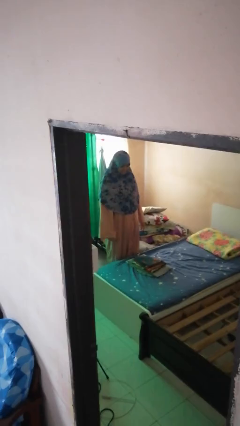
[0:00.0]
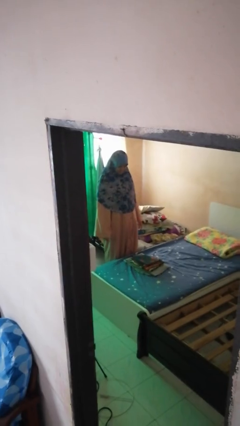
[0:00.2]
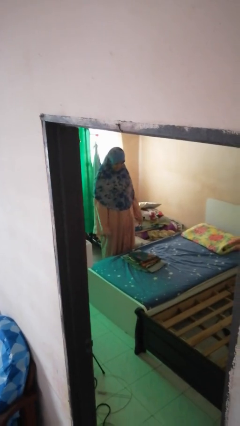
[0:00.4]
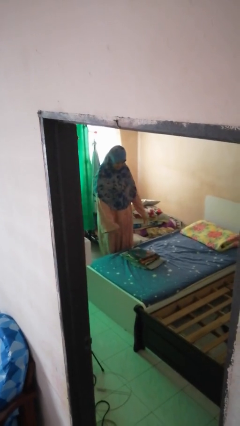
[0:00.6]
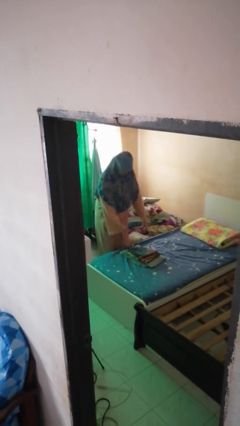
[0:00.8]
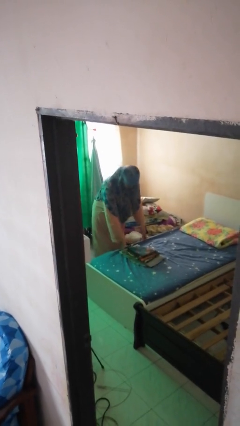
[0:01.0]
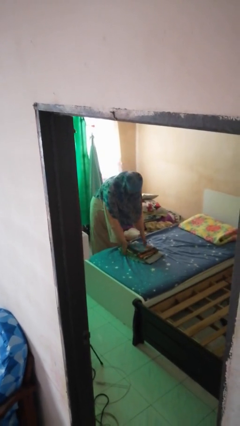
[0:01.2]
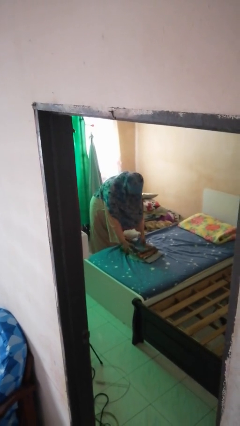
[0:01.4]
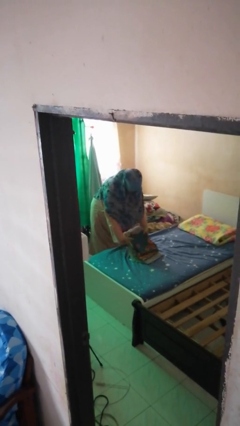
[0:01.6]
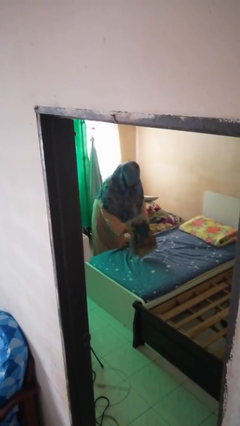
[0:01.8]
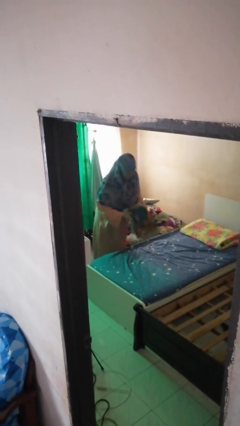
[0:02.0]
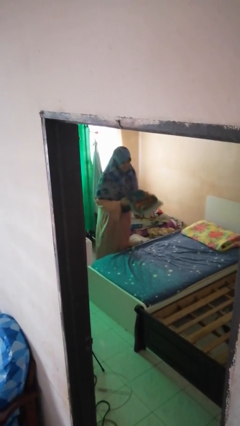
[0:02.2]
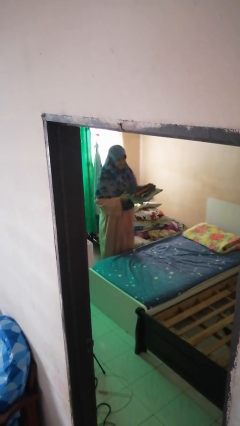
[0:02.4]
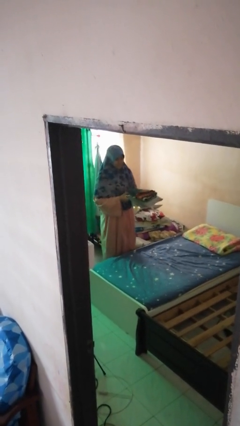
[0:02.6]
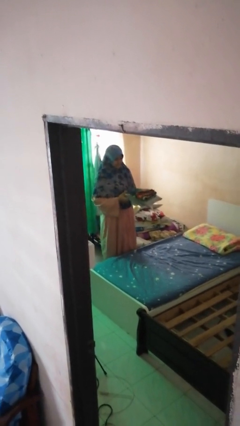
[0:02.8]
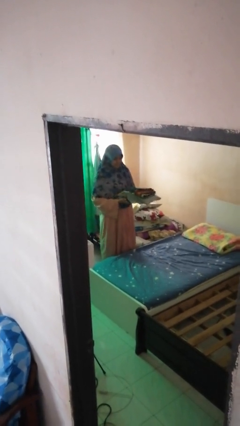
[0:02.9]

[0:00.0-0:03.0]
person picks up object from bed

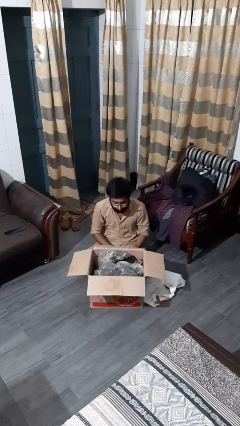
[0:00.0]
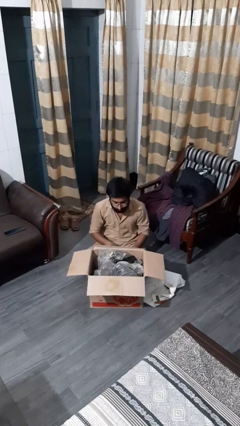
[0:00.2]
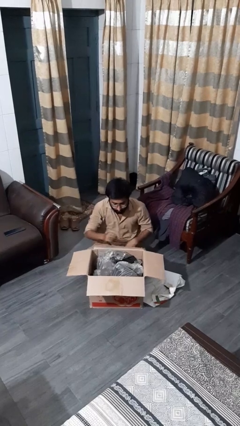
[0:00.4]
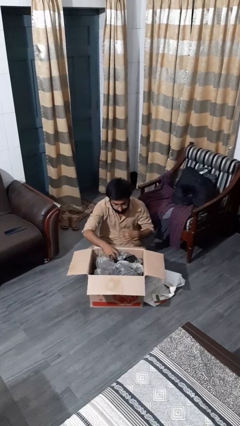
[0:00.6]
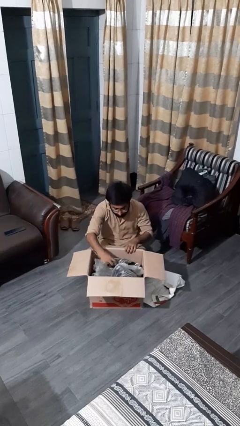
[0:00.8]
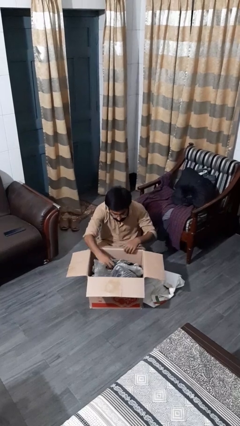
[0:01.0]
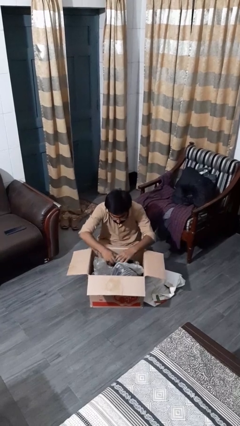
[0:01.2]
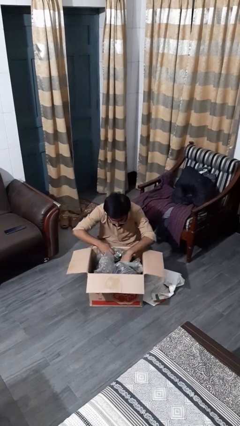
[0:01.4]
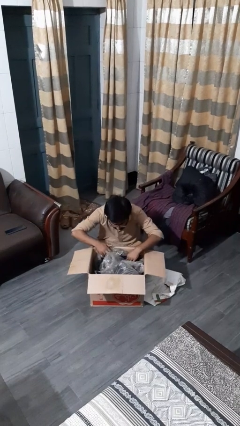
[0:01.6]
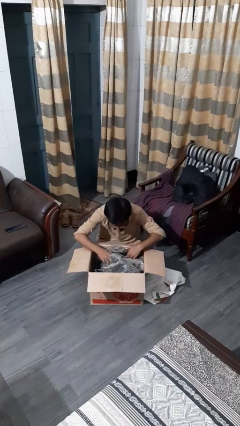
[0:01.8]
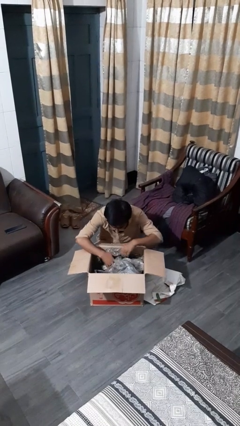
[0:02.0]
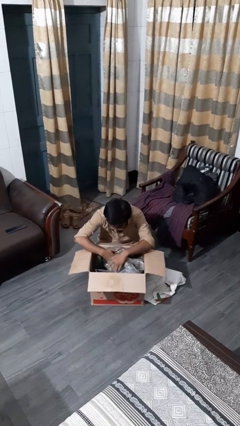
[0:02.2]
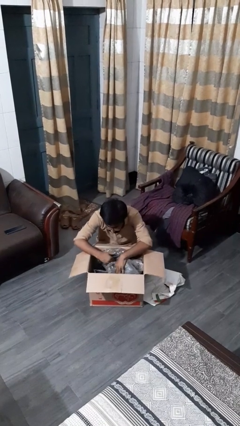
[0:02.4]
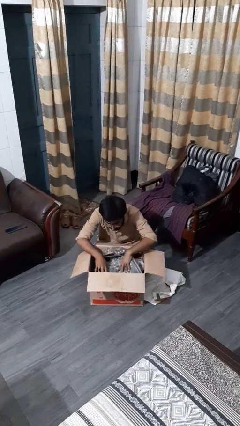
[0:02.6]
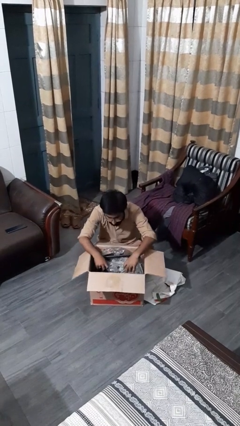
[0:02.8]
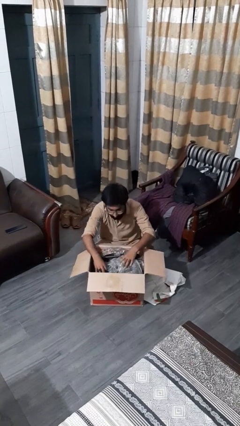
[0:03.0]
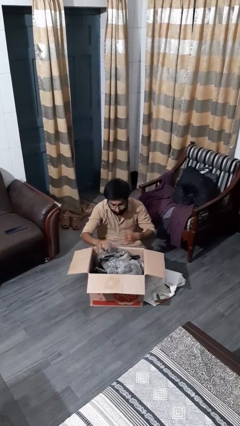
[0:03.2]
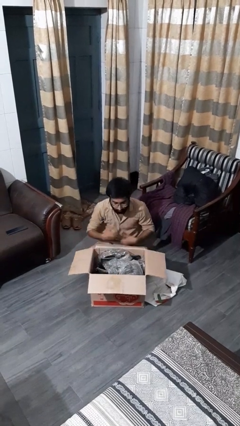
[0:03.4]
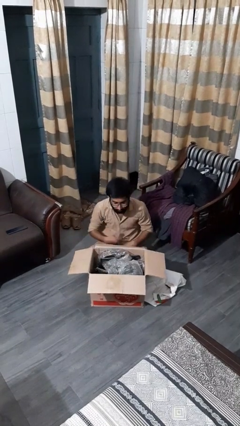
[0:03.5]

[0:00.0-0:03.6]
person searches in box

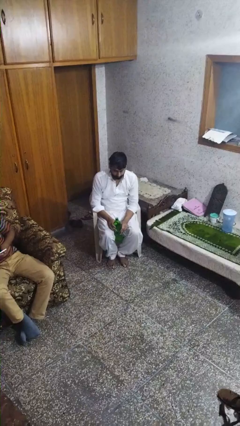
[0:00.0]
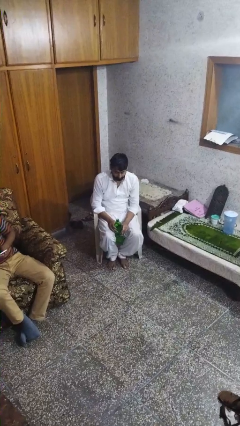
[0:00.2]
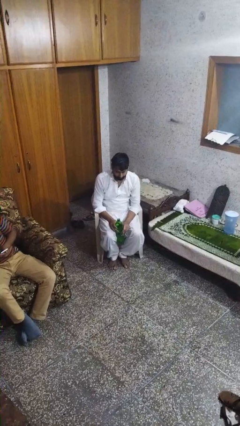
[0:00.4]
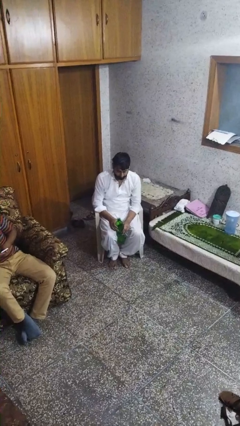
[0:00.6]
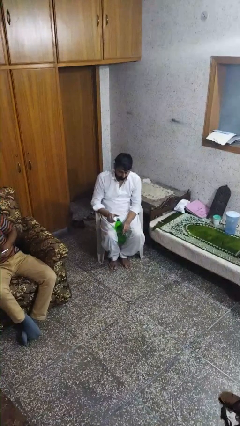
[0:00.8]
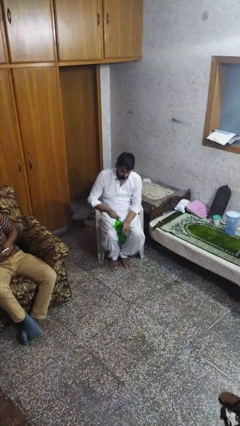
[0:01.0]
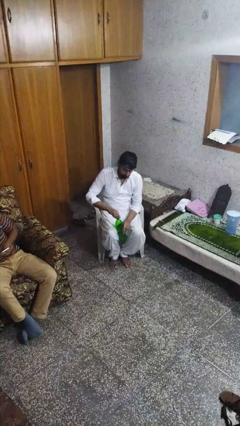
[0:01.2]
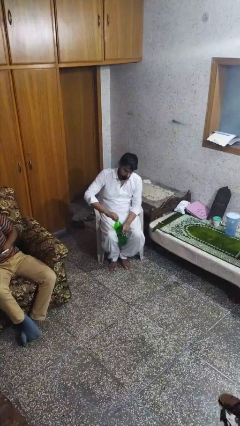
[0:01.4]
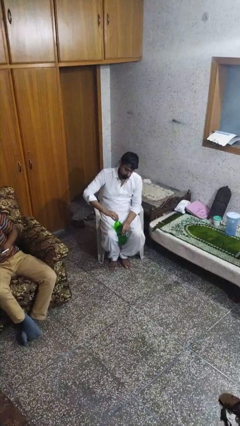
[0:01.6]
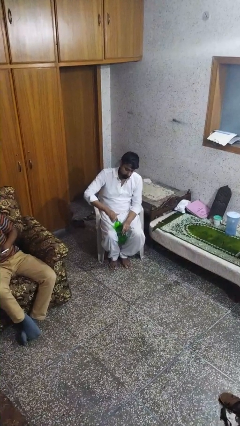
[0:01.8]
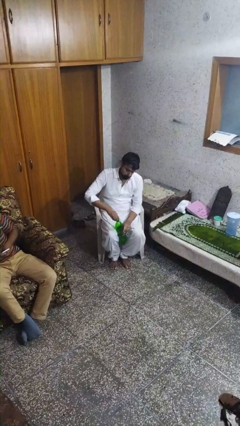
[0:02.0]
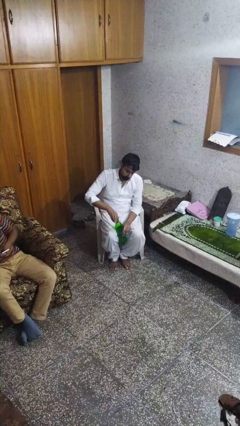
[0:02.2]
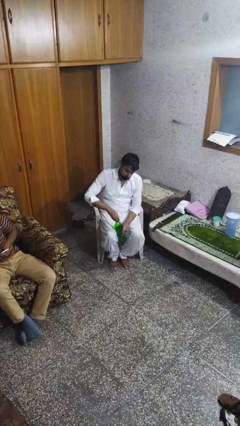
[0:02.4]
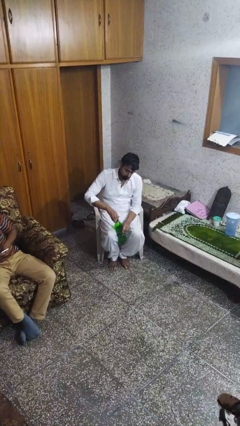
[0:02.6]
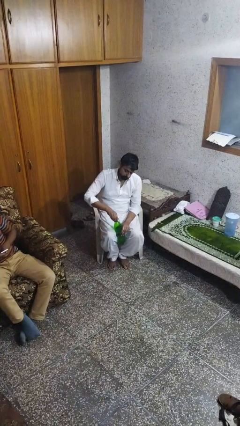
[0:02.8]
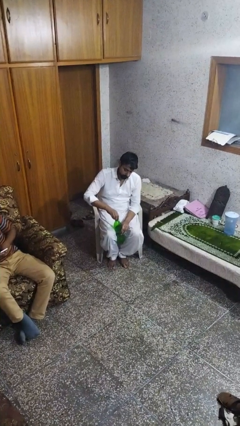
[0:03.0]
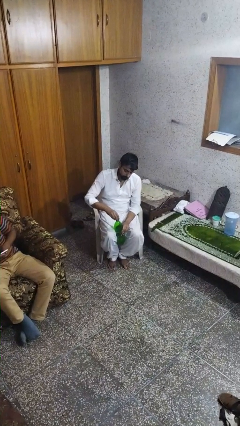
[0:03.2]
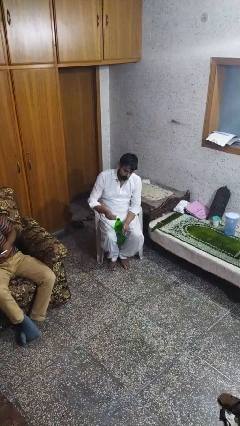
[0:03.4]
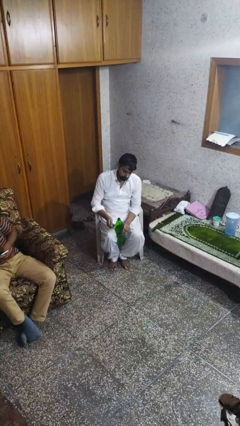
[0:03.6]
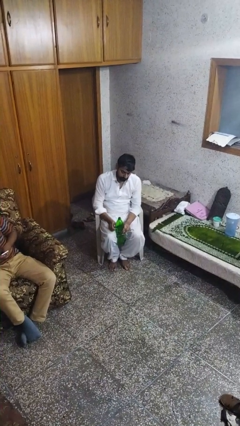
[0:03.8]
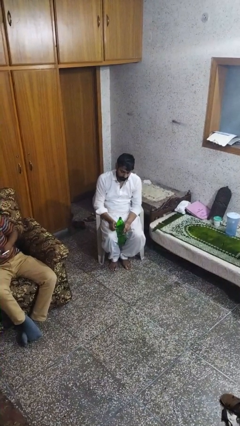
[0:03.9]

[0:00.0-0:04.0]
person unscrews lid from bottle

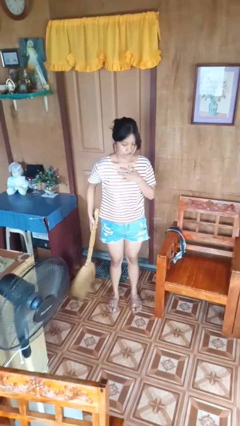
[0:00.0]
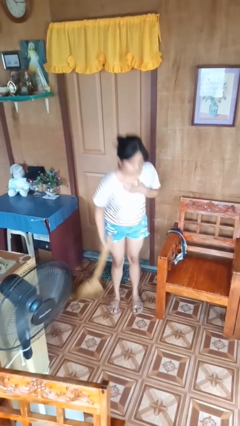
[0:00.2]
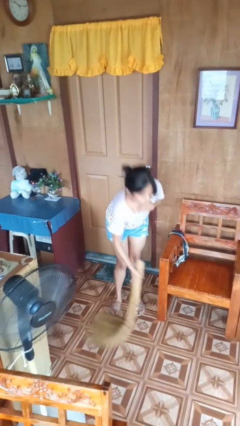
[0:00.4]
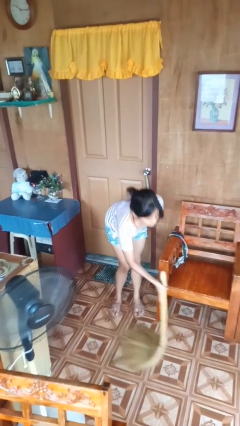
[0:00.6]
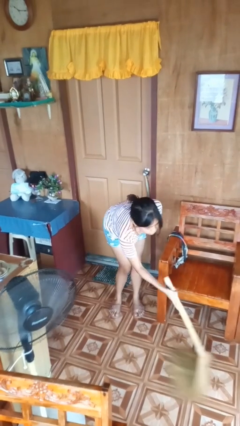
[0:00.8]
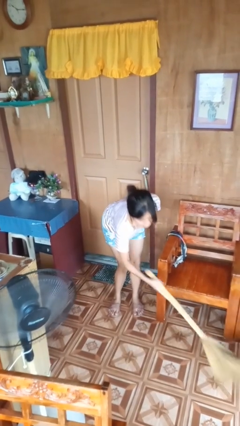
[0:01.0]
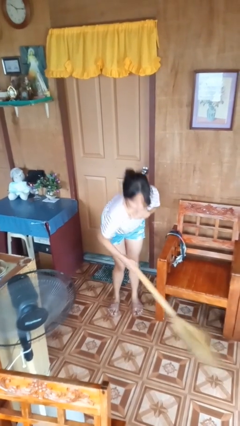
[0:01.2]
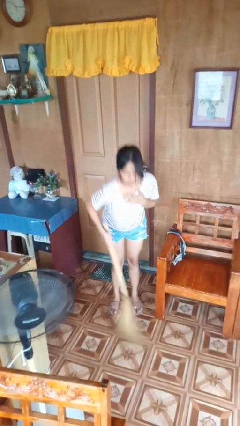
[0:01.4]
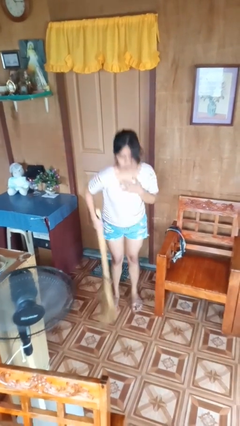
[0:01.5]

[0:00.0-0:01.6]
person sweeps floor

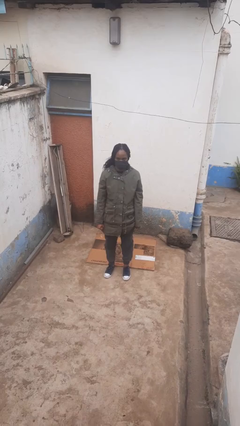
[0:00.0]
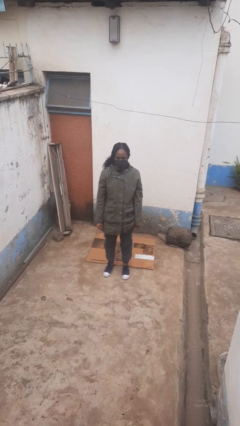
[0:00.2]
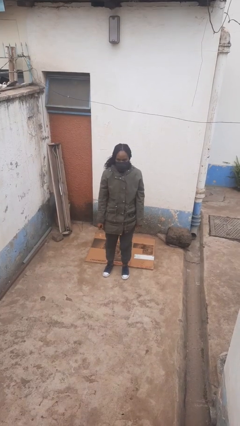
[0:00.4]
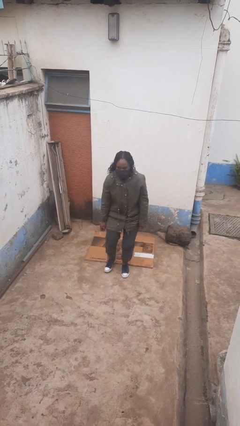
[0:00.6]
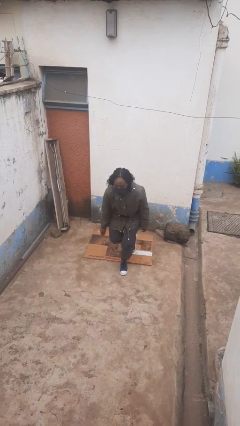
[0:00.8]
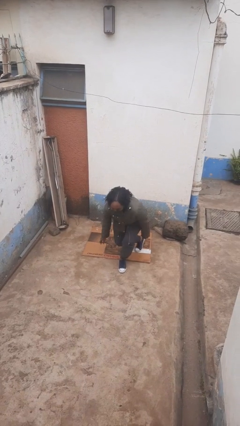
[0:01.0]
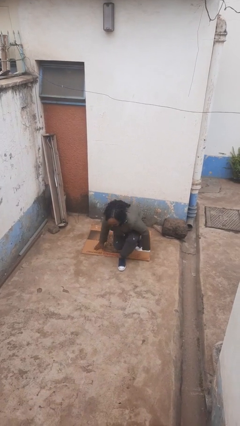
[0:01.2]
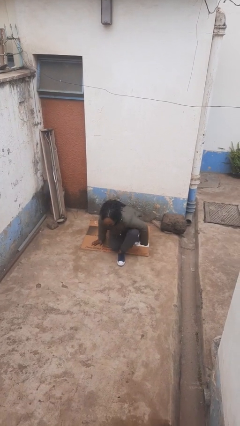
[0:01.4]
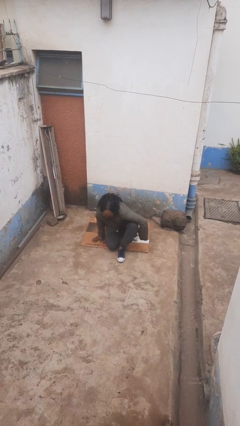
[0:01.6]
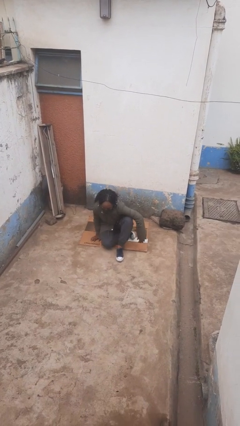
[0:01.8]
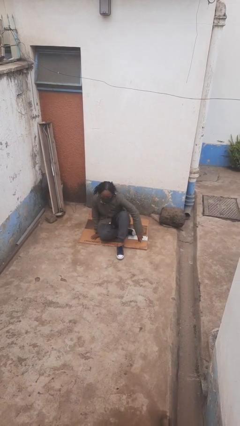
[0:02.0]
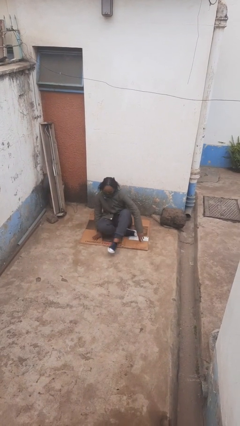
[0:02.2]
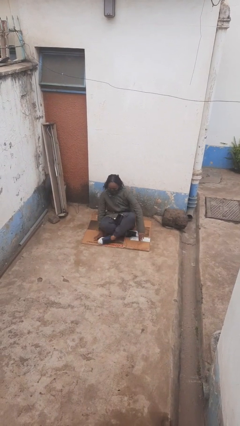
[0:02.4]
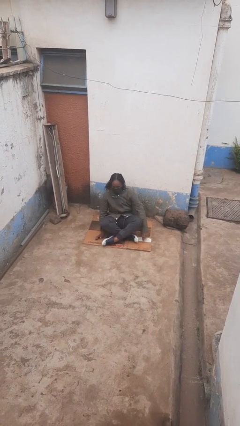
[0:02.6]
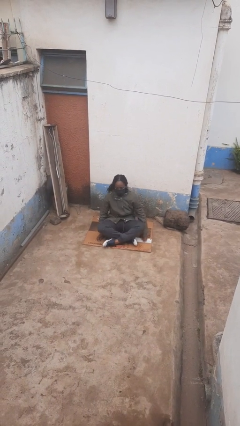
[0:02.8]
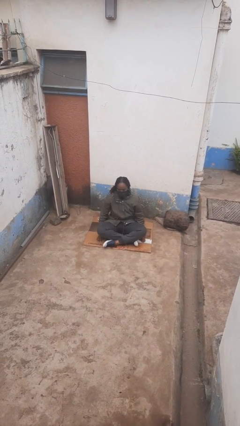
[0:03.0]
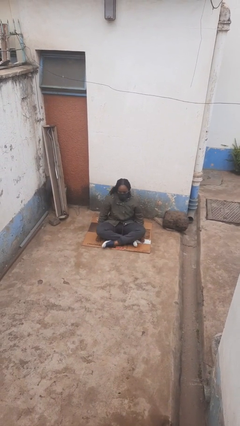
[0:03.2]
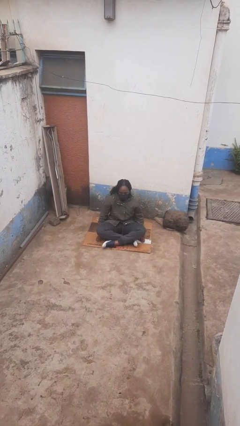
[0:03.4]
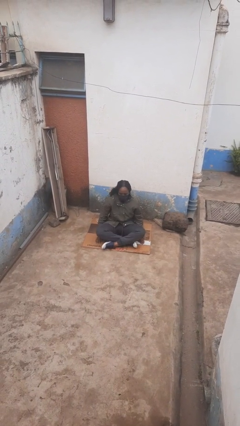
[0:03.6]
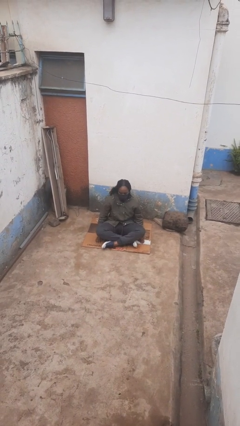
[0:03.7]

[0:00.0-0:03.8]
person sits crisscross

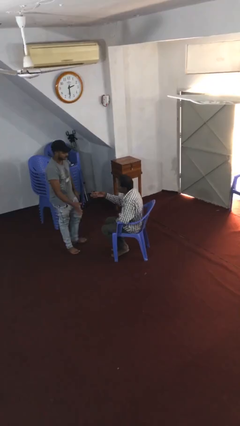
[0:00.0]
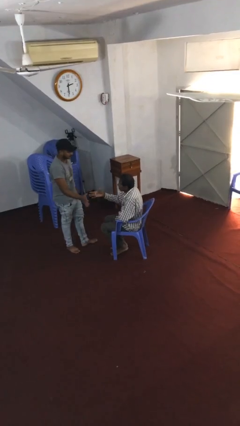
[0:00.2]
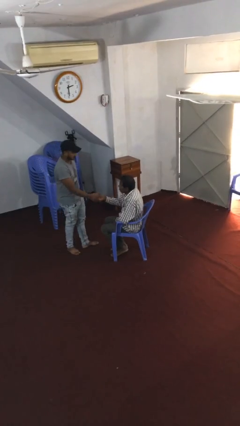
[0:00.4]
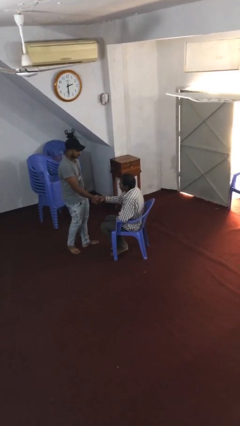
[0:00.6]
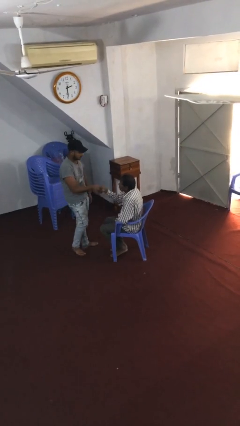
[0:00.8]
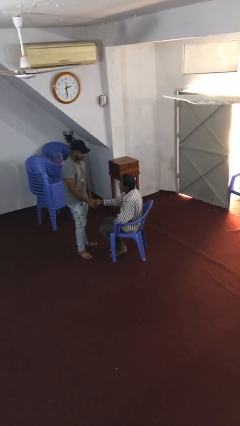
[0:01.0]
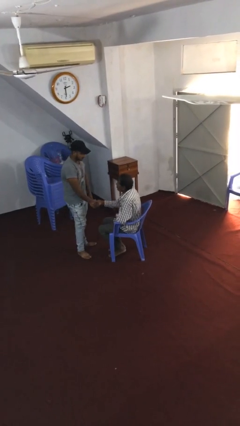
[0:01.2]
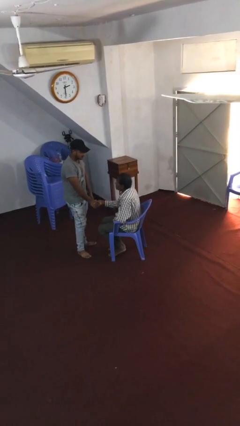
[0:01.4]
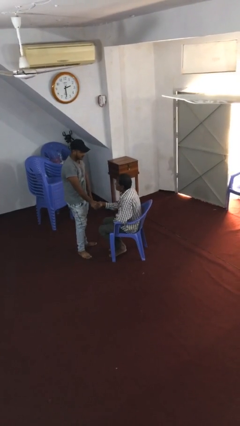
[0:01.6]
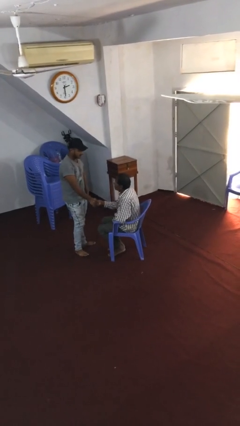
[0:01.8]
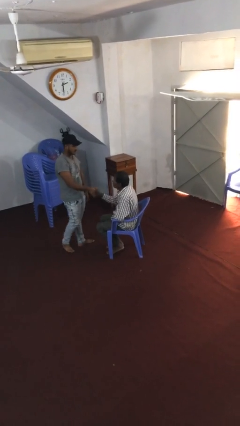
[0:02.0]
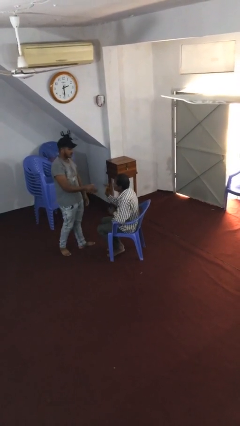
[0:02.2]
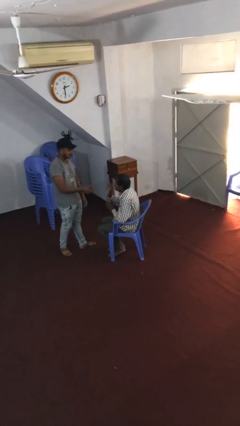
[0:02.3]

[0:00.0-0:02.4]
person shakes hand
